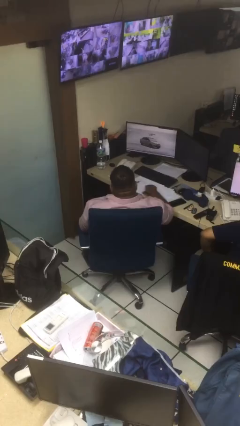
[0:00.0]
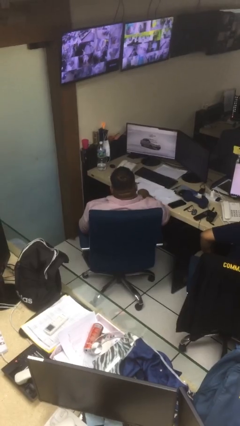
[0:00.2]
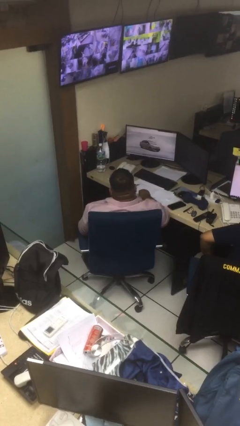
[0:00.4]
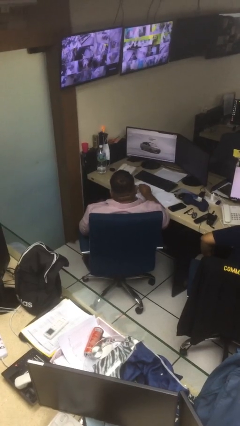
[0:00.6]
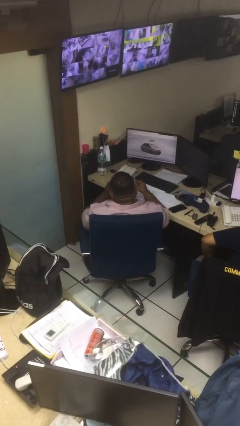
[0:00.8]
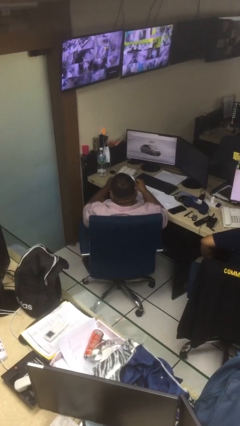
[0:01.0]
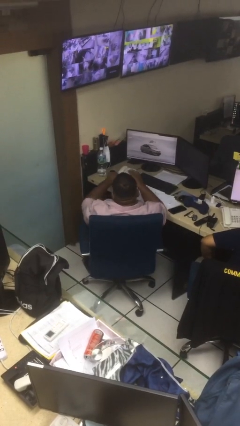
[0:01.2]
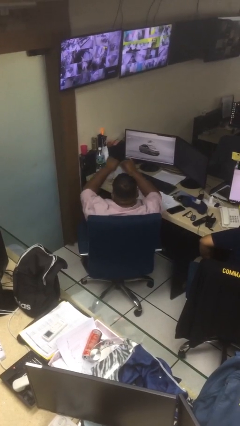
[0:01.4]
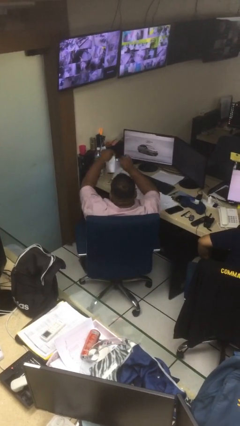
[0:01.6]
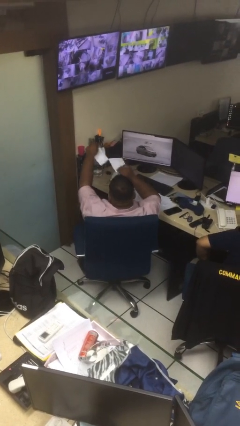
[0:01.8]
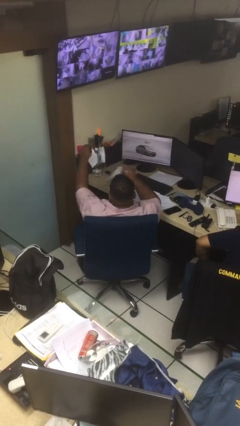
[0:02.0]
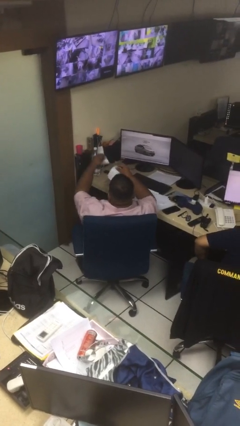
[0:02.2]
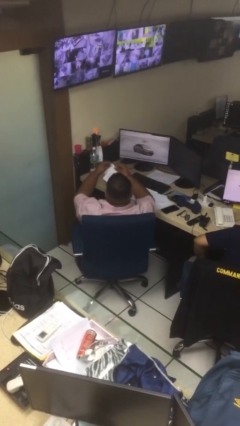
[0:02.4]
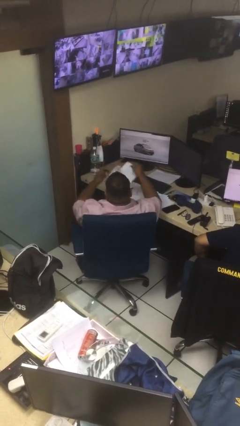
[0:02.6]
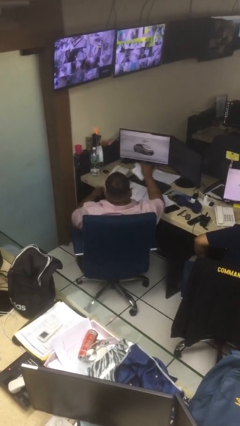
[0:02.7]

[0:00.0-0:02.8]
person tears paper

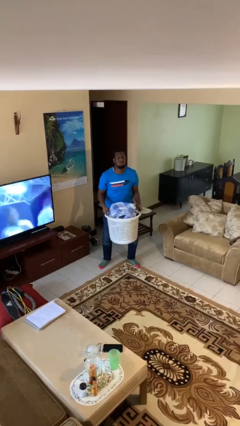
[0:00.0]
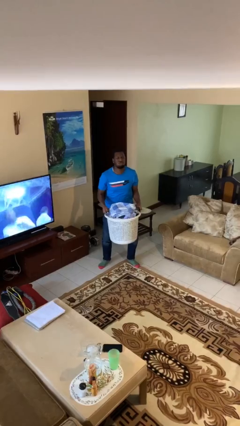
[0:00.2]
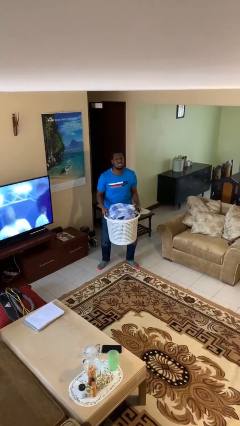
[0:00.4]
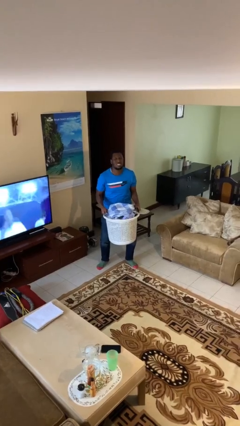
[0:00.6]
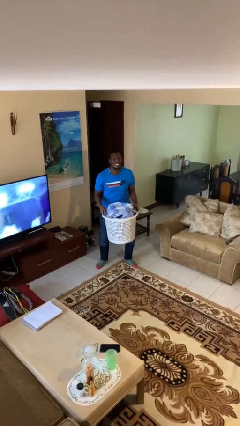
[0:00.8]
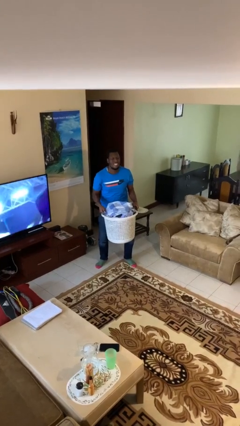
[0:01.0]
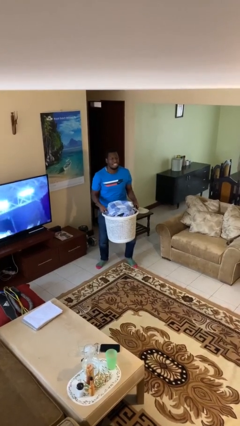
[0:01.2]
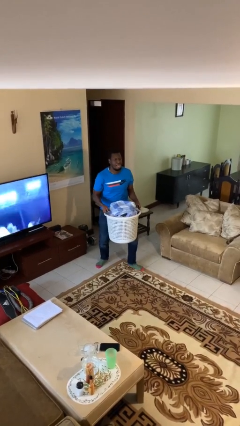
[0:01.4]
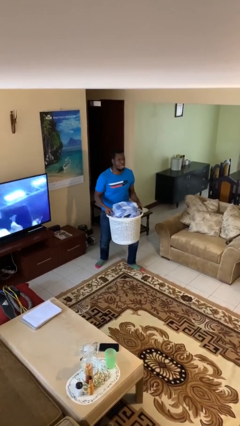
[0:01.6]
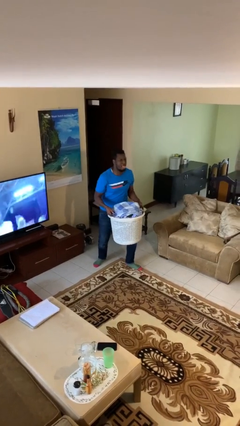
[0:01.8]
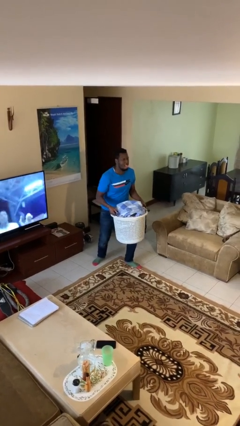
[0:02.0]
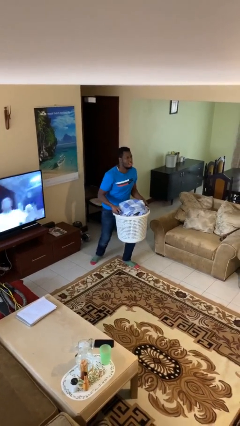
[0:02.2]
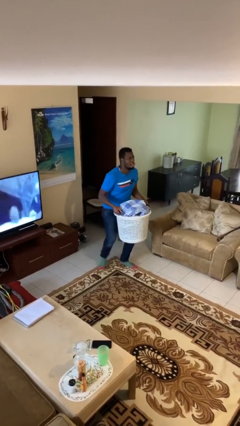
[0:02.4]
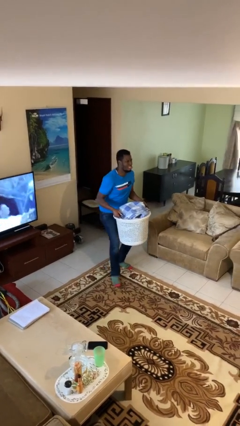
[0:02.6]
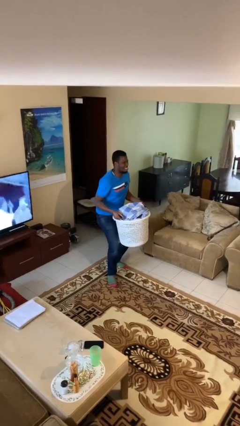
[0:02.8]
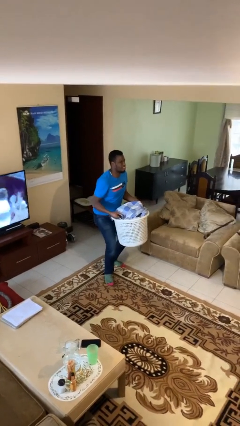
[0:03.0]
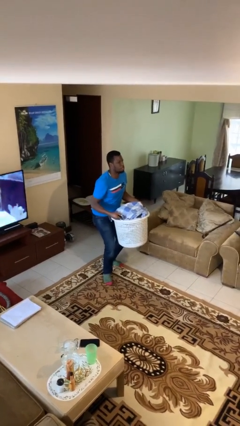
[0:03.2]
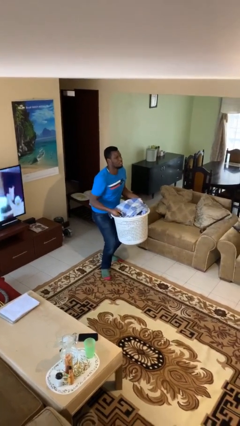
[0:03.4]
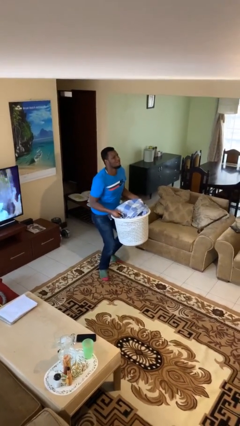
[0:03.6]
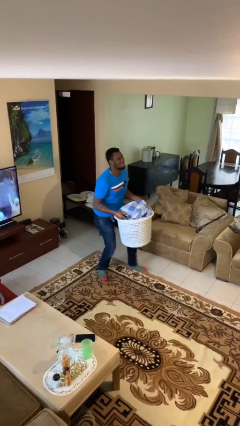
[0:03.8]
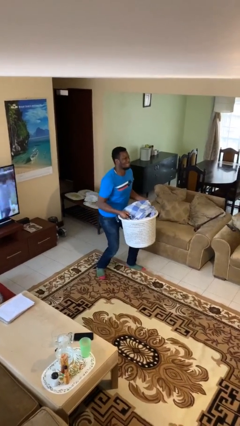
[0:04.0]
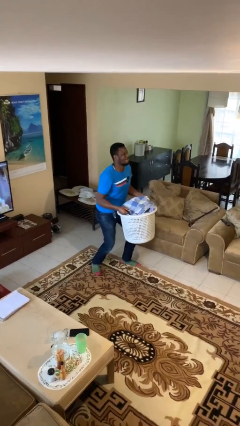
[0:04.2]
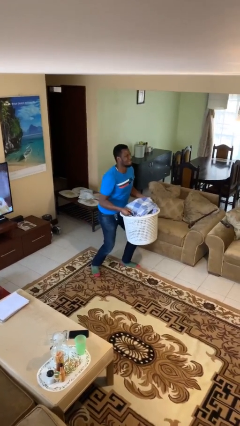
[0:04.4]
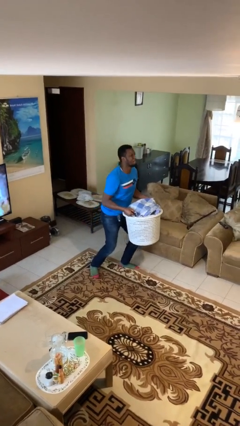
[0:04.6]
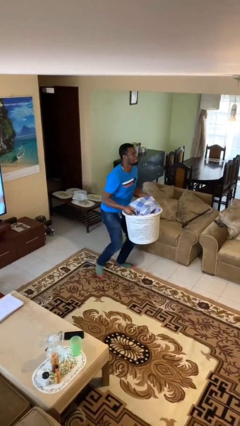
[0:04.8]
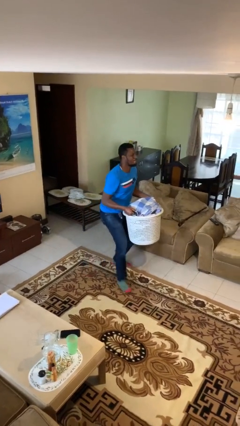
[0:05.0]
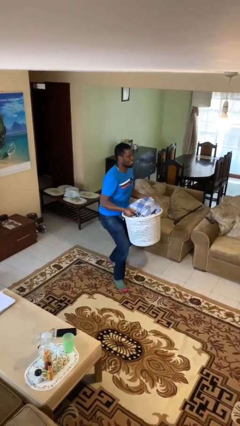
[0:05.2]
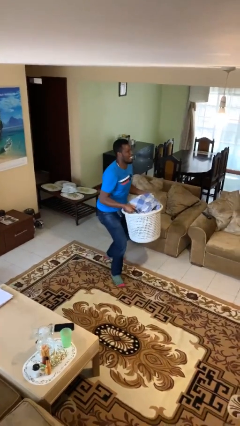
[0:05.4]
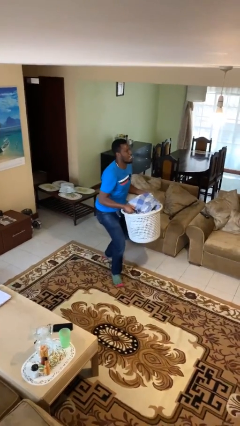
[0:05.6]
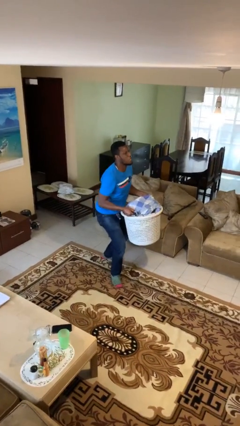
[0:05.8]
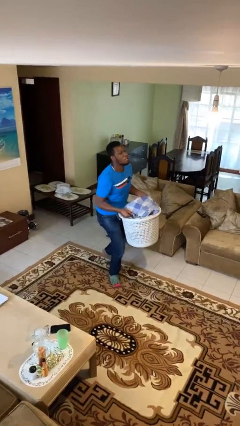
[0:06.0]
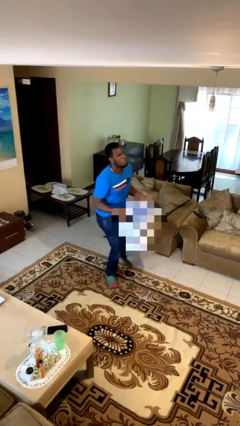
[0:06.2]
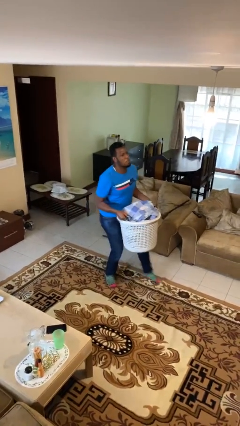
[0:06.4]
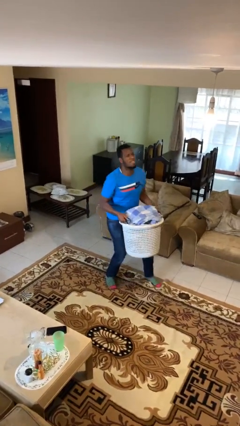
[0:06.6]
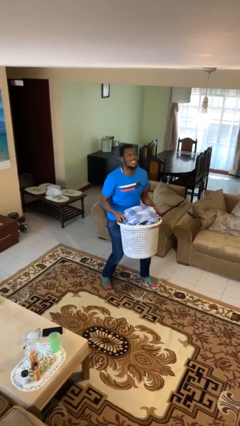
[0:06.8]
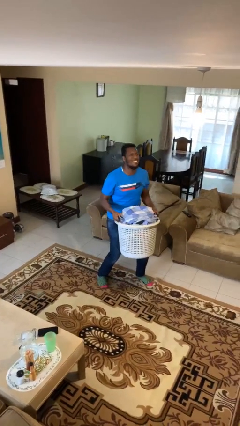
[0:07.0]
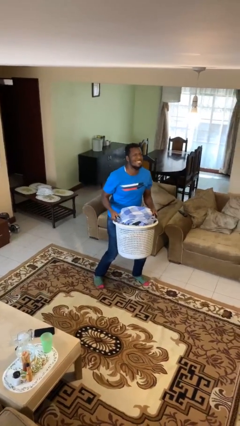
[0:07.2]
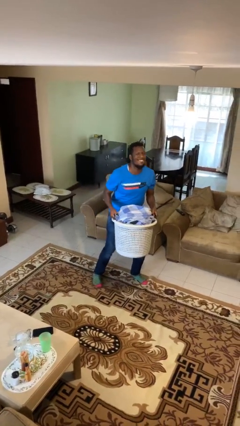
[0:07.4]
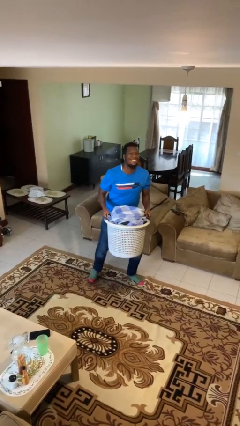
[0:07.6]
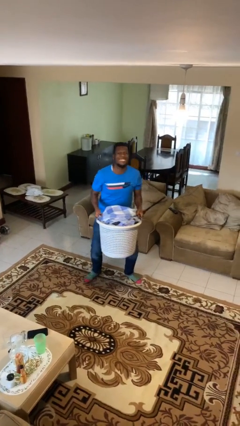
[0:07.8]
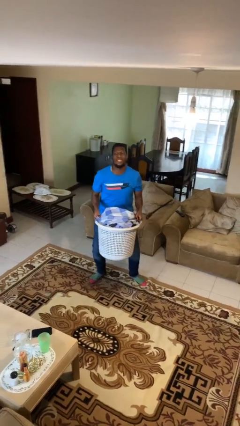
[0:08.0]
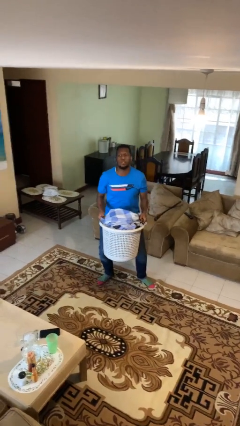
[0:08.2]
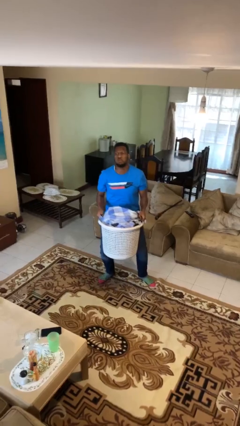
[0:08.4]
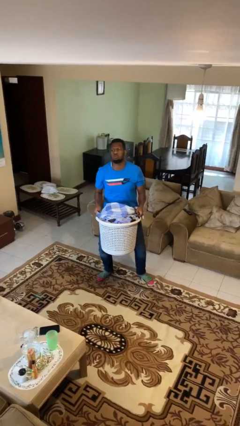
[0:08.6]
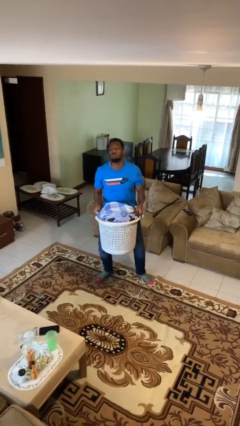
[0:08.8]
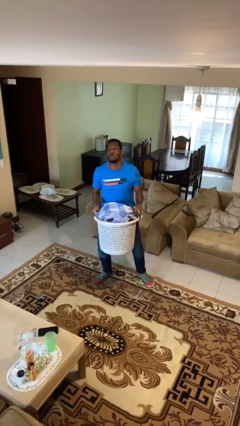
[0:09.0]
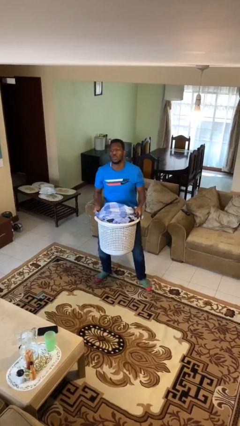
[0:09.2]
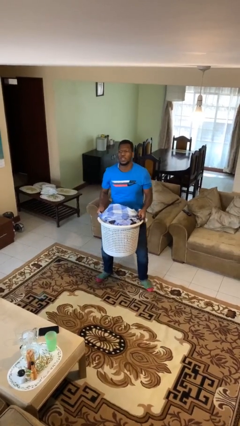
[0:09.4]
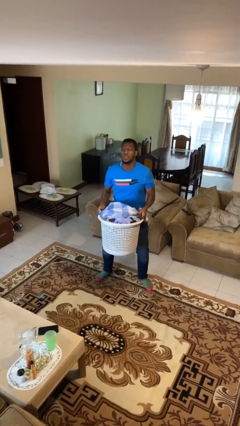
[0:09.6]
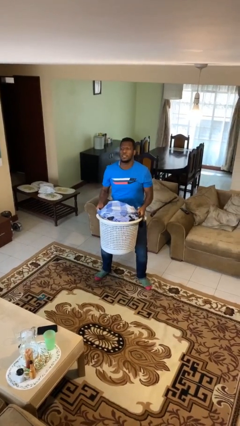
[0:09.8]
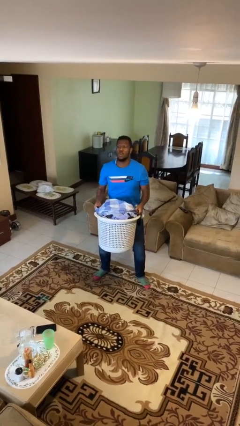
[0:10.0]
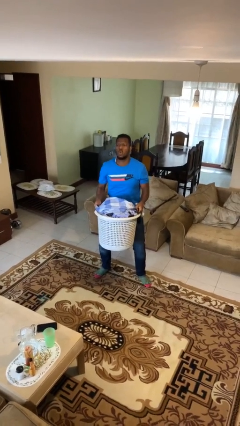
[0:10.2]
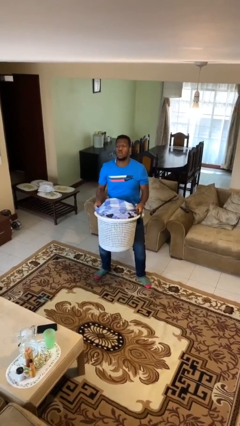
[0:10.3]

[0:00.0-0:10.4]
person carries heavy object

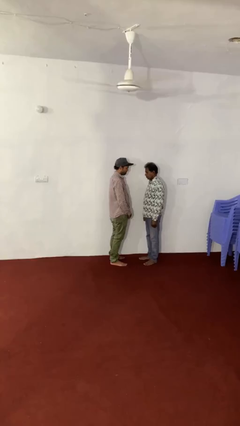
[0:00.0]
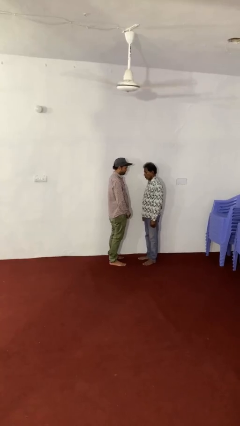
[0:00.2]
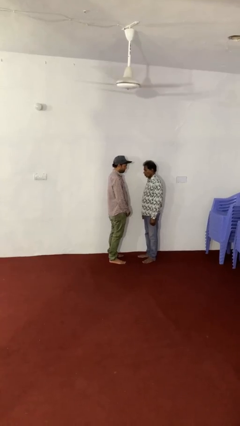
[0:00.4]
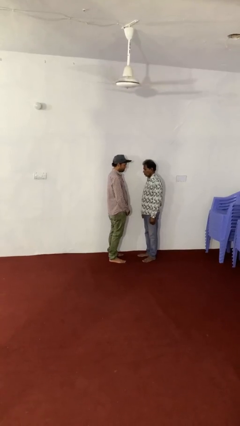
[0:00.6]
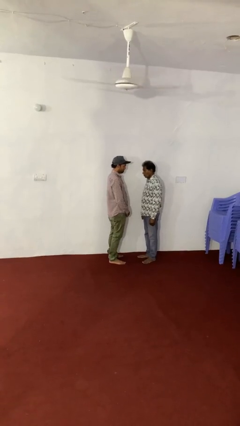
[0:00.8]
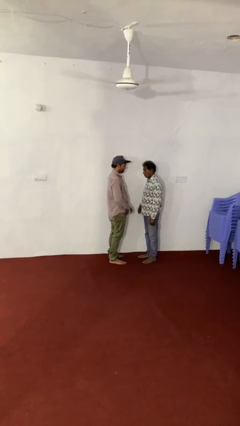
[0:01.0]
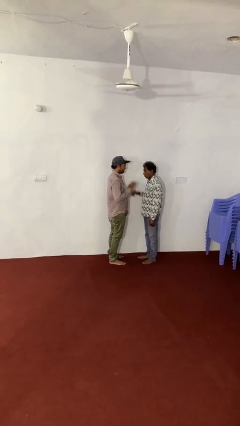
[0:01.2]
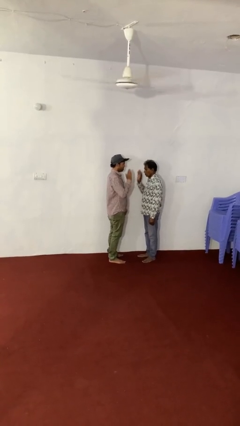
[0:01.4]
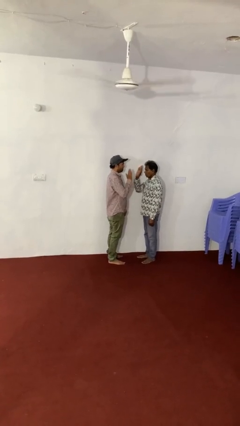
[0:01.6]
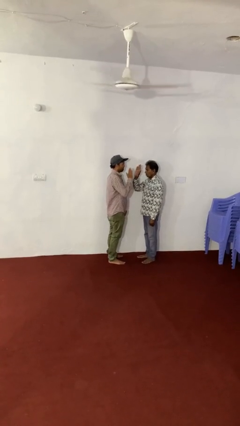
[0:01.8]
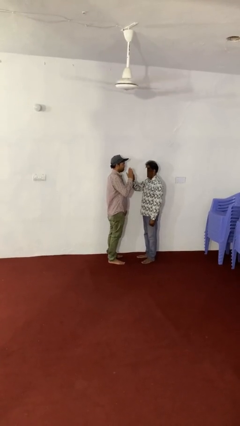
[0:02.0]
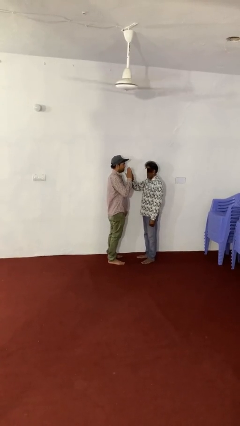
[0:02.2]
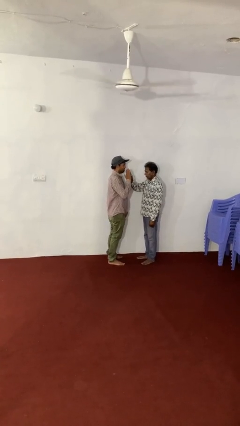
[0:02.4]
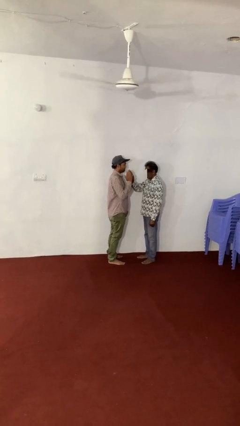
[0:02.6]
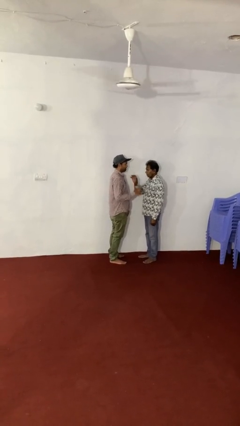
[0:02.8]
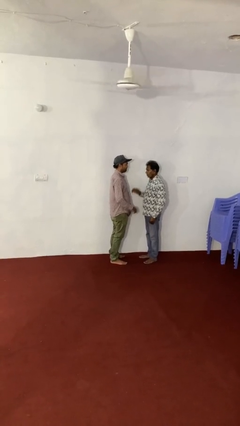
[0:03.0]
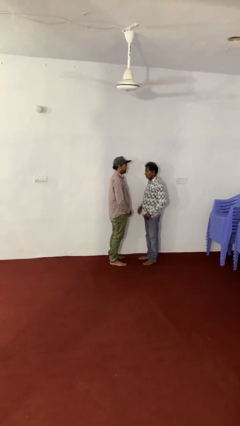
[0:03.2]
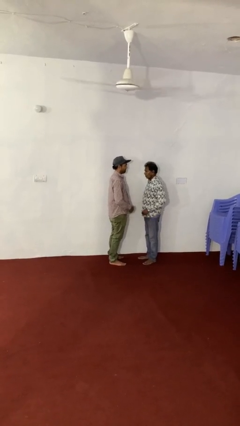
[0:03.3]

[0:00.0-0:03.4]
person highfives hand

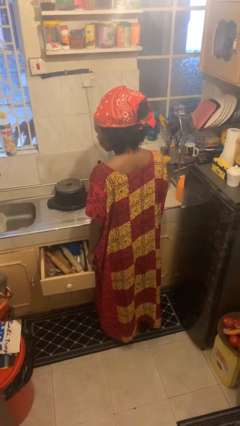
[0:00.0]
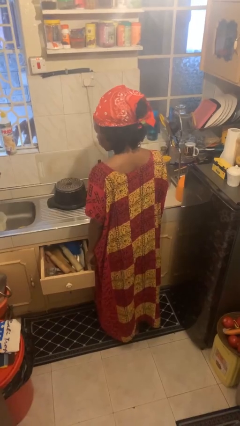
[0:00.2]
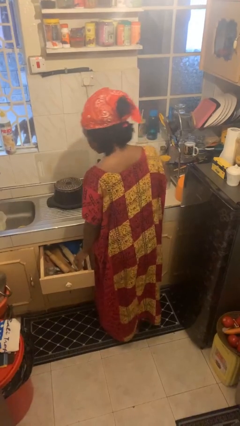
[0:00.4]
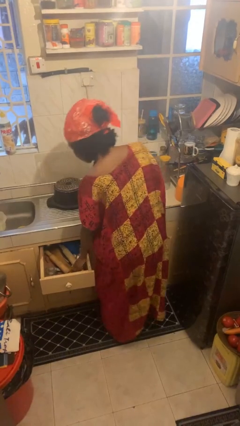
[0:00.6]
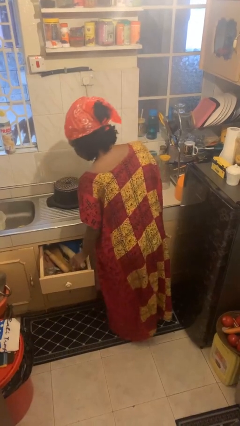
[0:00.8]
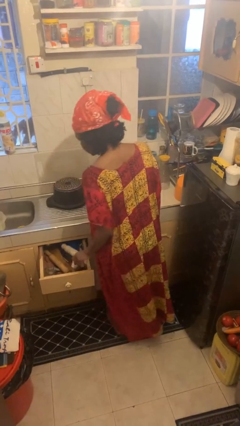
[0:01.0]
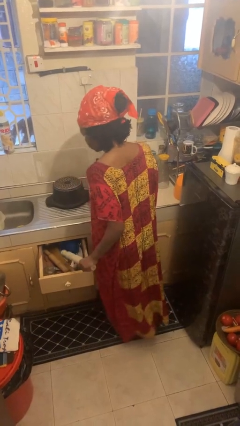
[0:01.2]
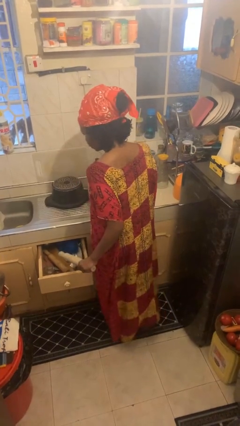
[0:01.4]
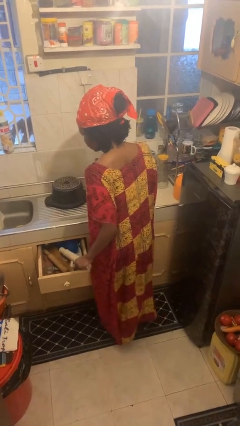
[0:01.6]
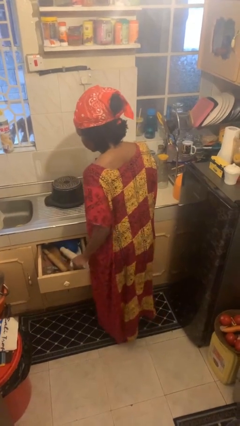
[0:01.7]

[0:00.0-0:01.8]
person takes object from kitchen drawer
